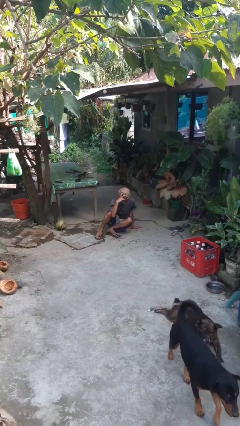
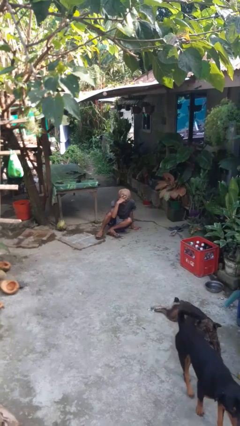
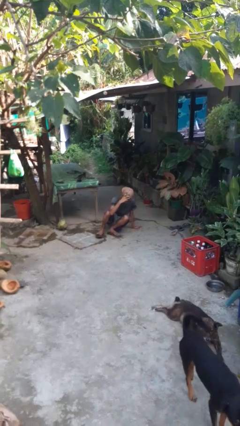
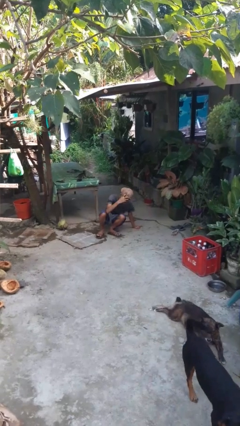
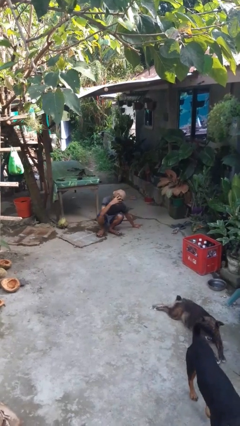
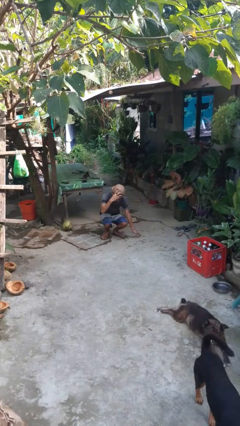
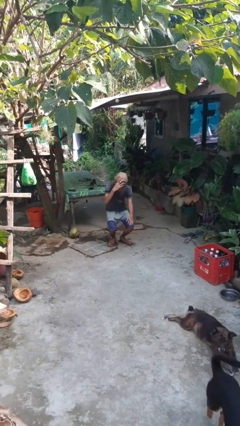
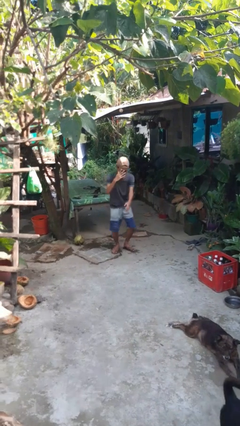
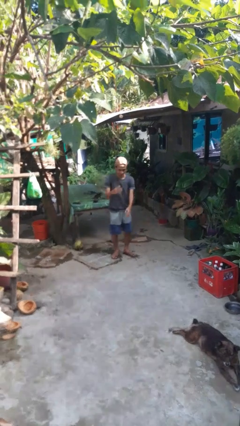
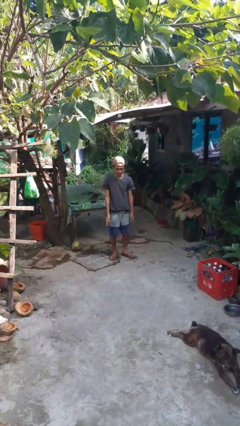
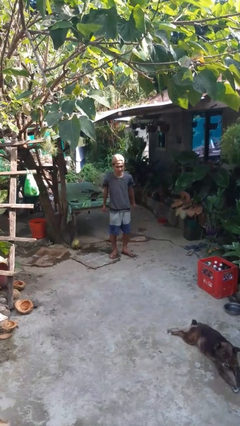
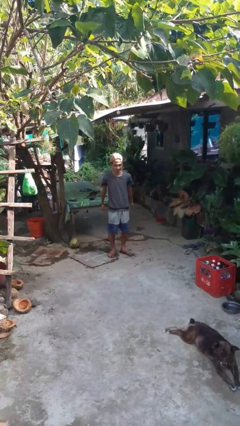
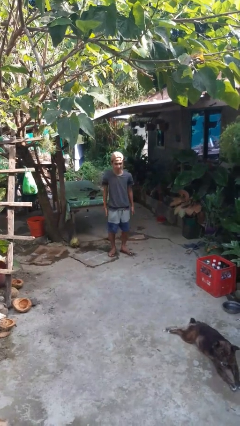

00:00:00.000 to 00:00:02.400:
person stands up from floor

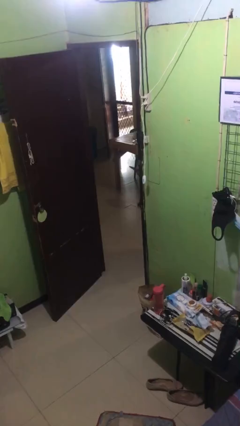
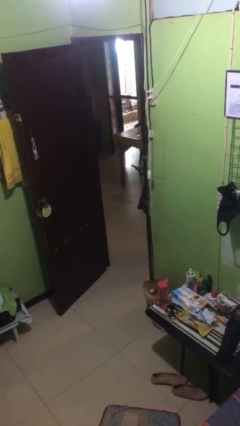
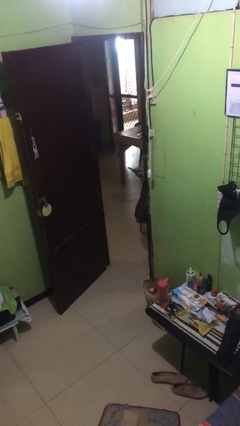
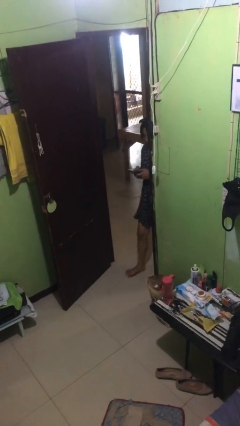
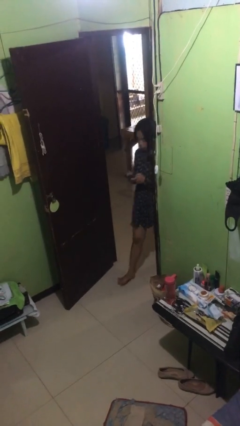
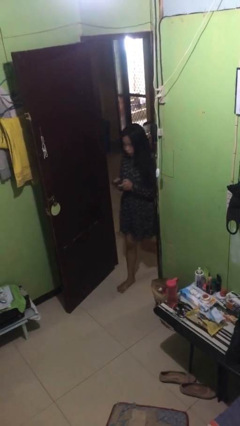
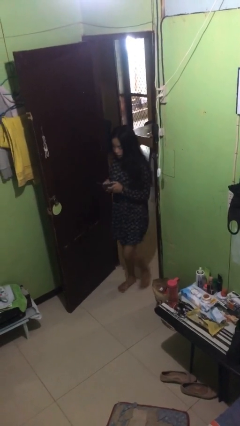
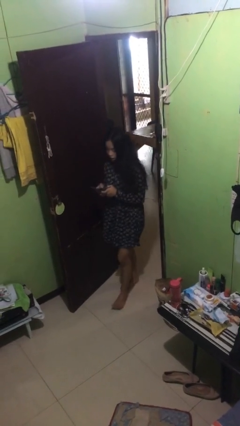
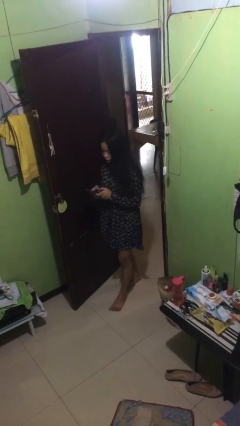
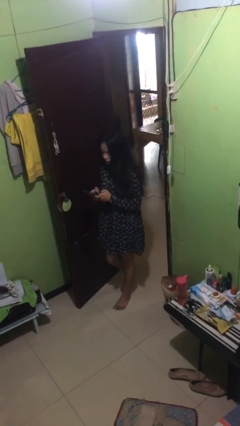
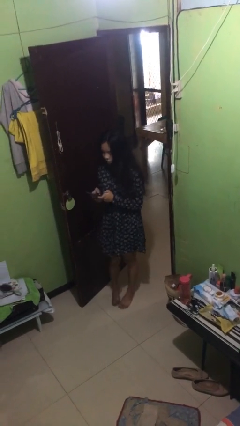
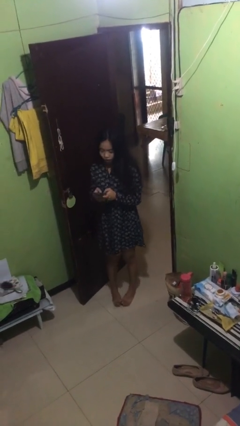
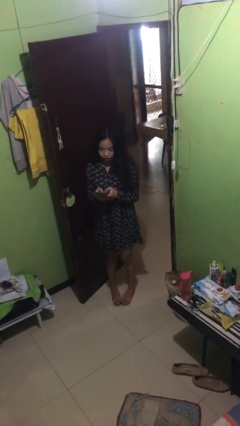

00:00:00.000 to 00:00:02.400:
person enters scene through structure

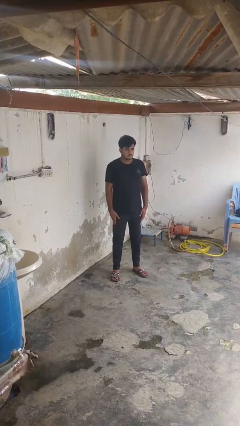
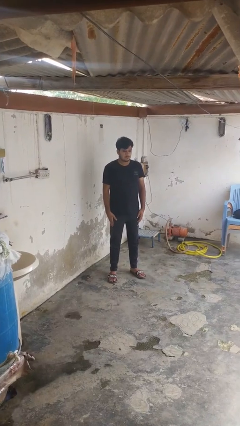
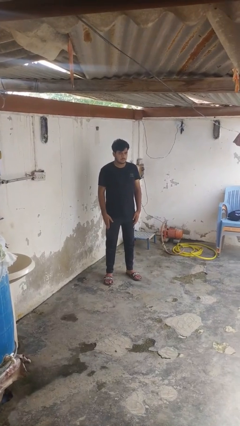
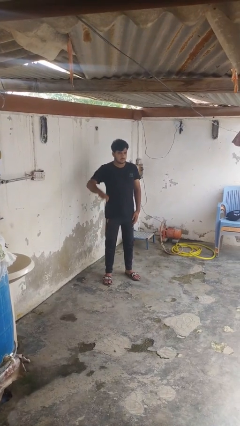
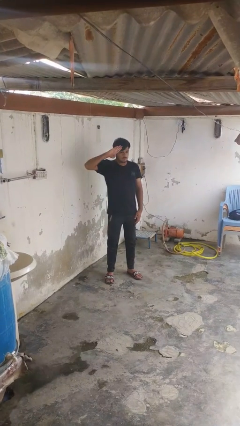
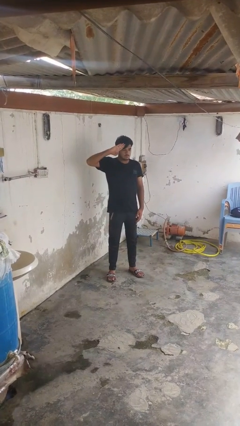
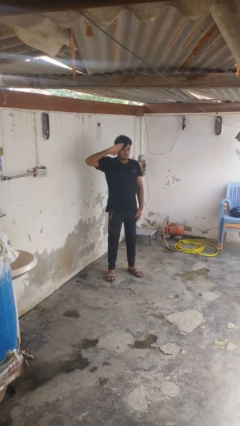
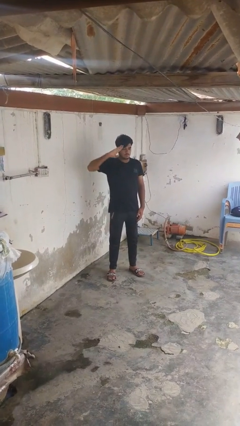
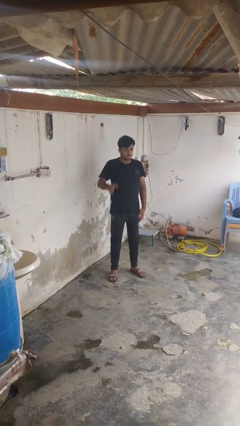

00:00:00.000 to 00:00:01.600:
person salutes

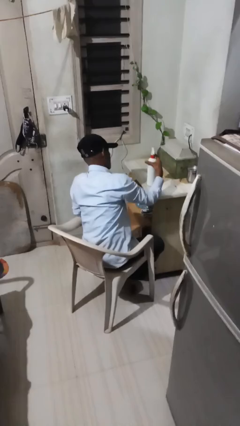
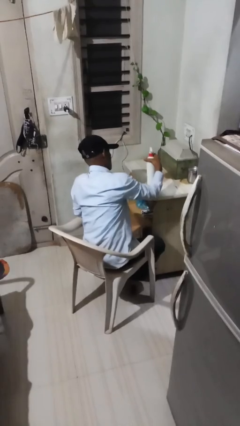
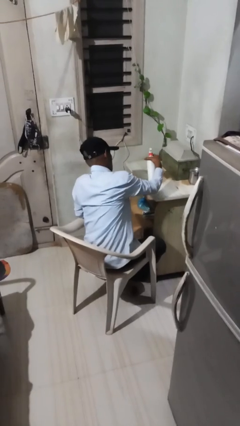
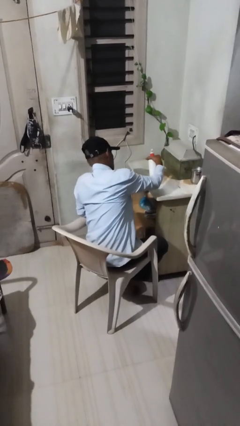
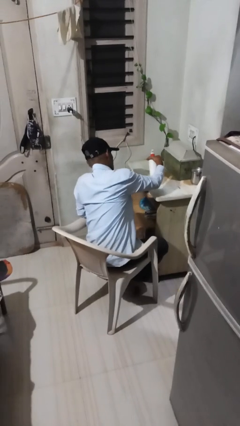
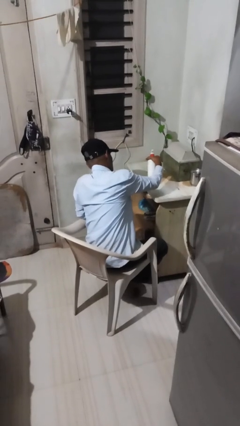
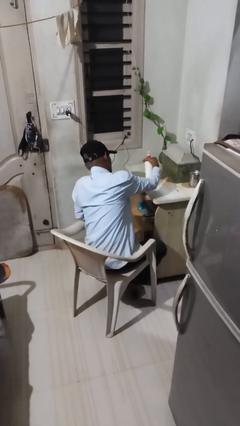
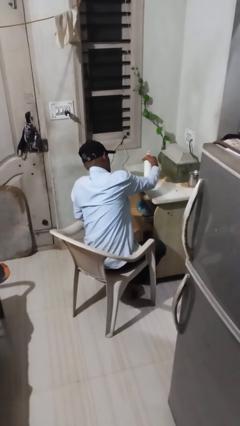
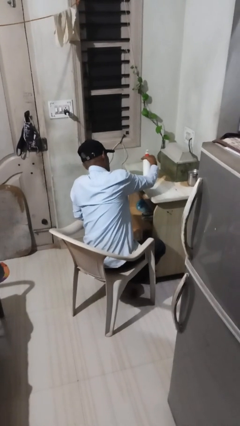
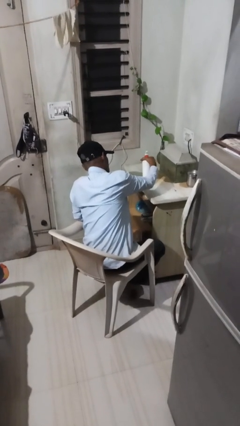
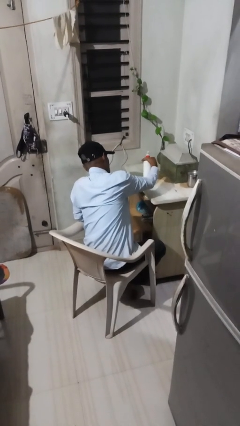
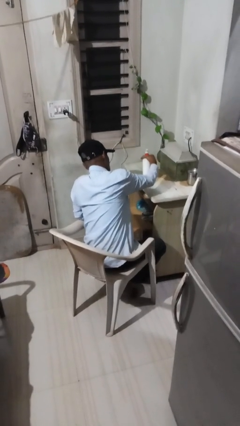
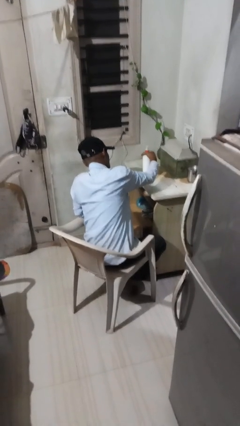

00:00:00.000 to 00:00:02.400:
person sprays from bottle

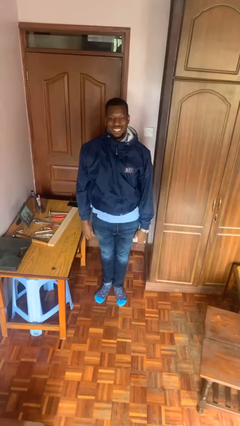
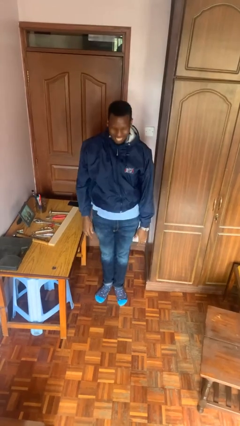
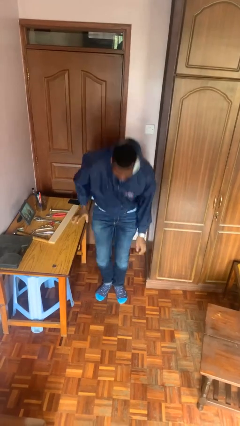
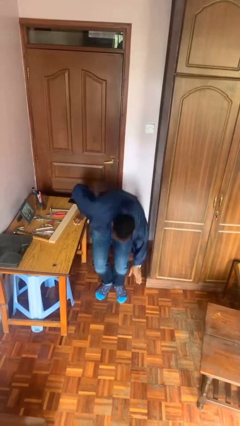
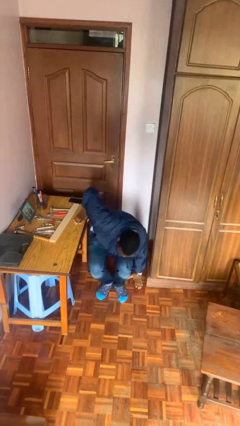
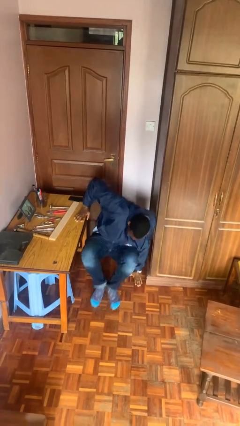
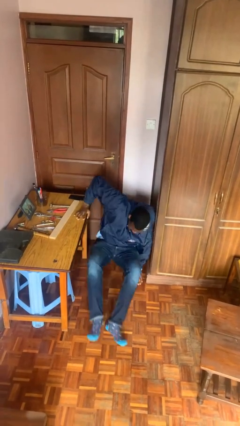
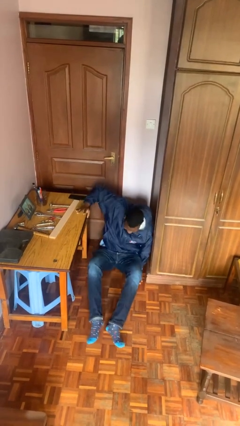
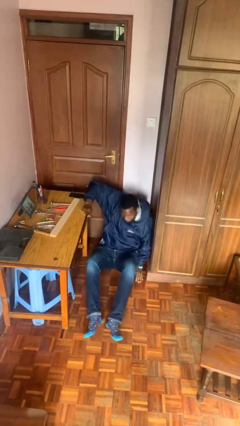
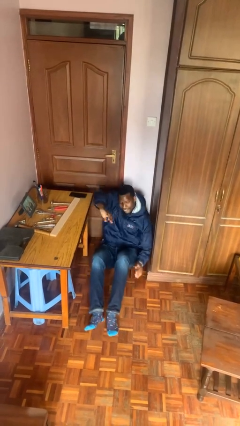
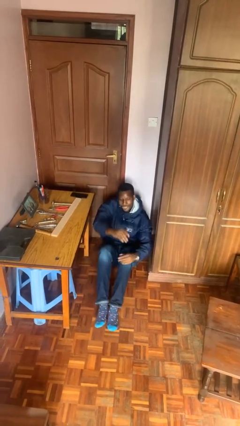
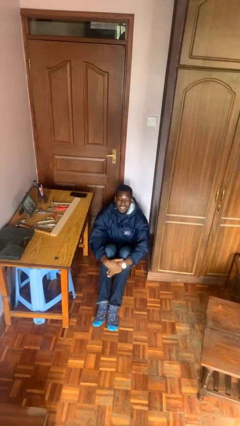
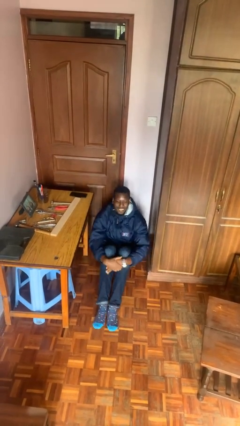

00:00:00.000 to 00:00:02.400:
person sits down

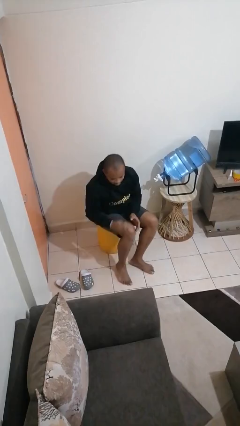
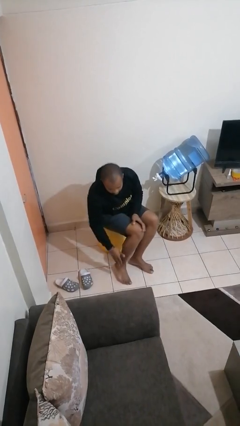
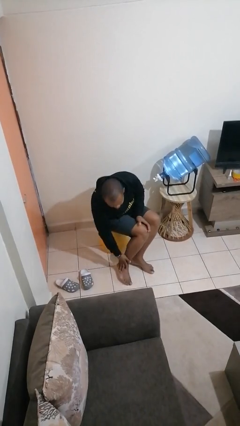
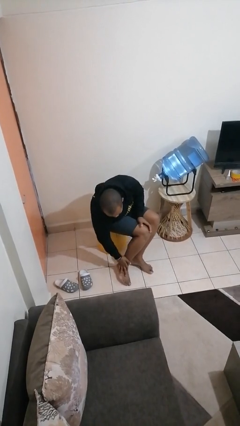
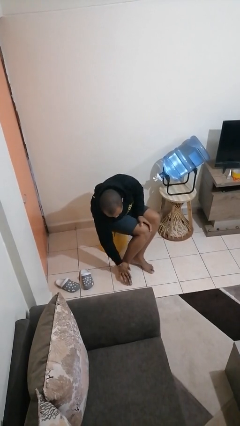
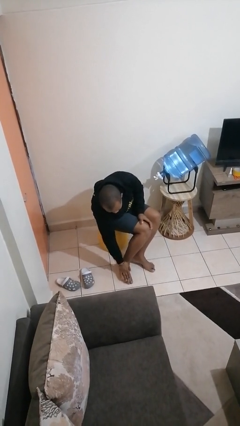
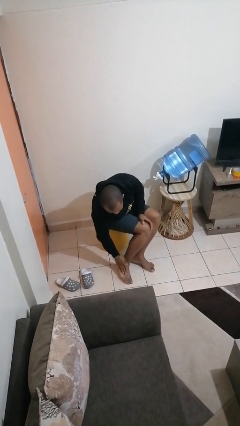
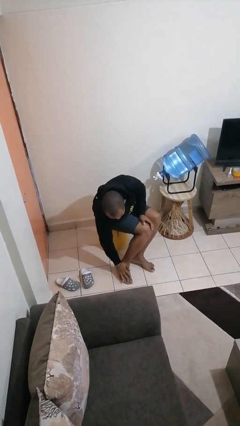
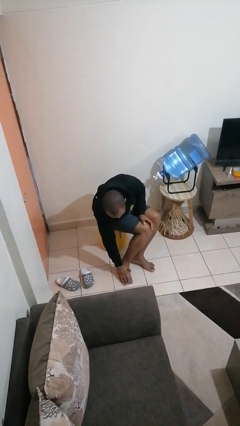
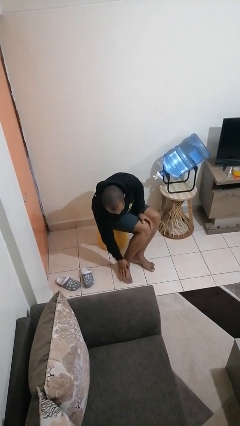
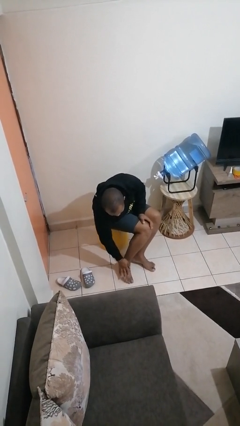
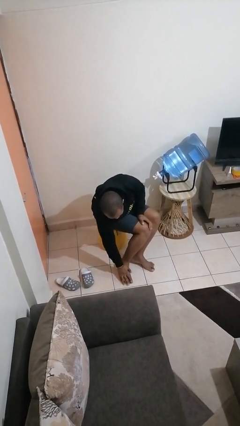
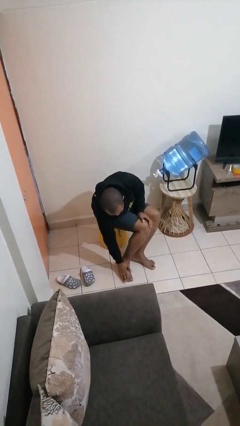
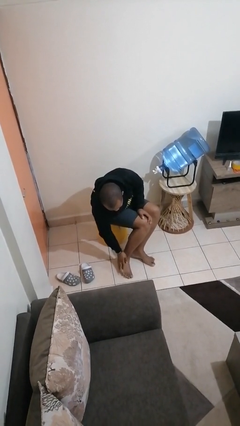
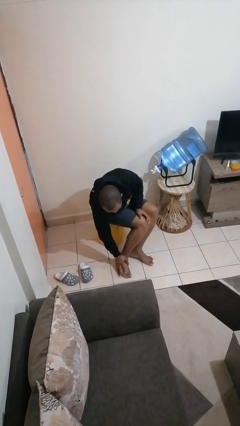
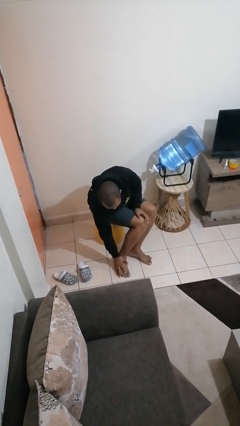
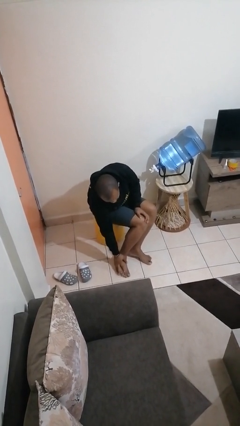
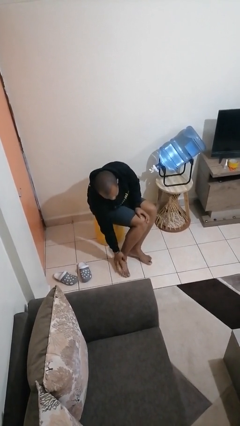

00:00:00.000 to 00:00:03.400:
person rubs foot

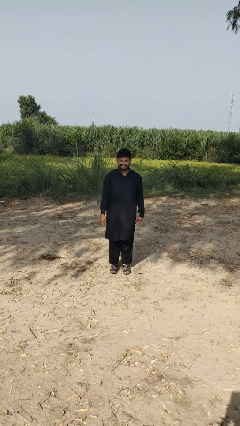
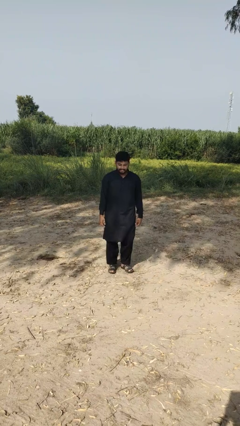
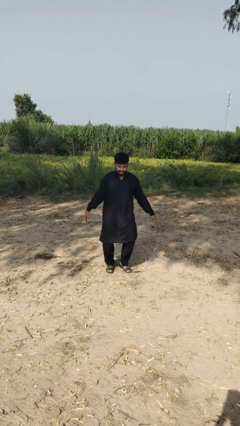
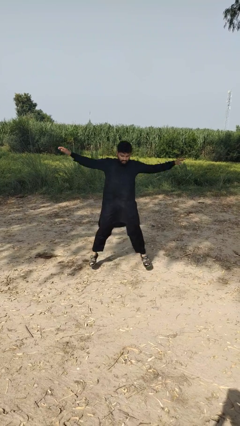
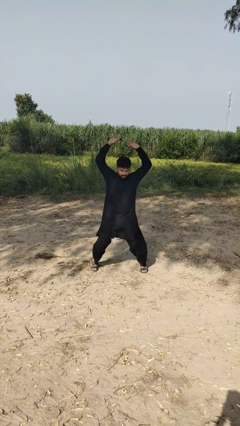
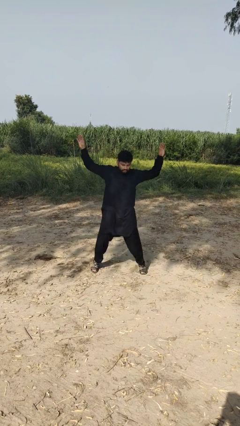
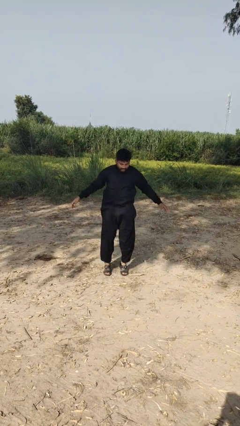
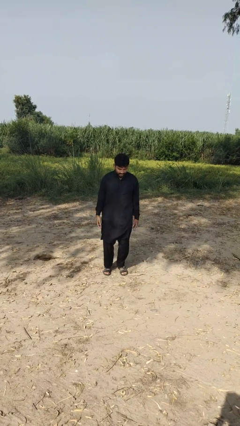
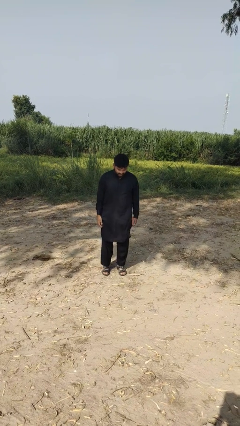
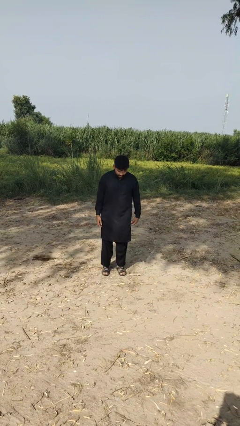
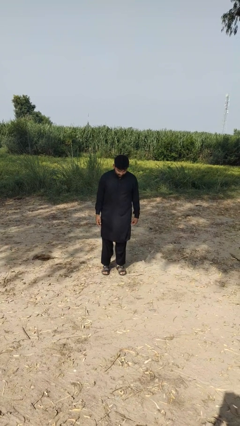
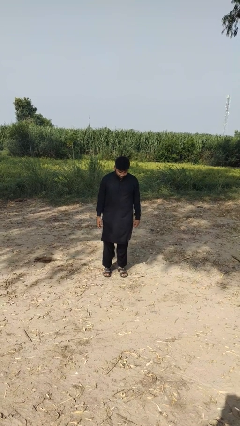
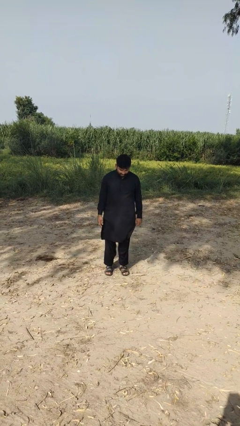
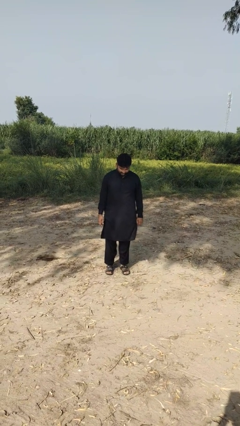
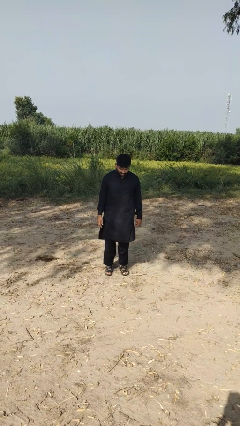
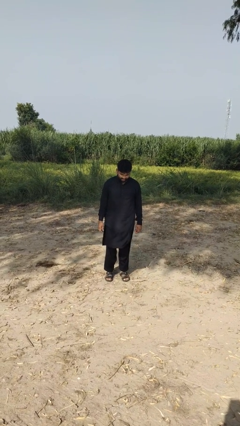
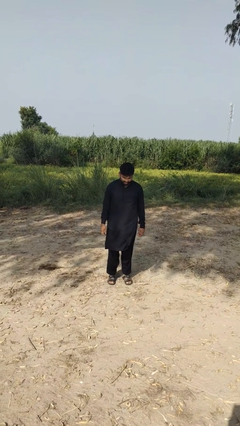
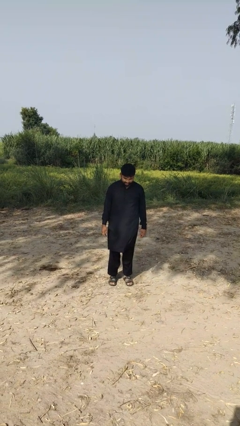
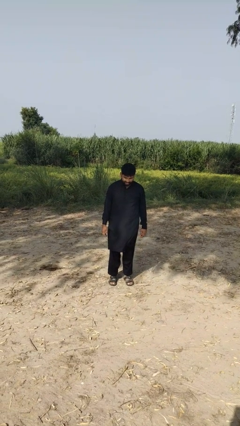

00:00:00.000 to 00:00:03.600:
person exercises with jumping jacks
